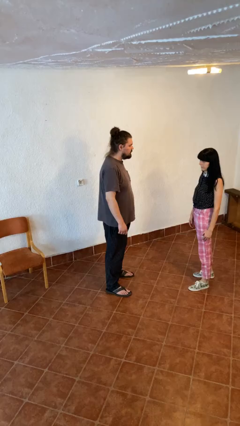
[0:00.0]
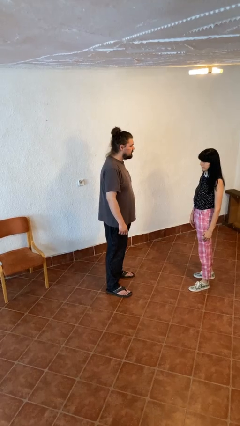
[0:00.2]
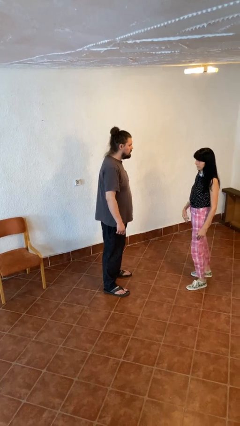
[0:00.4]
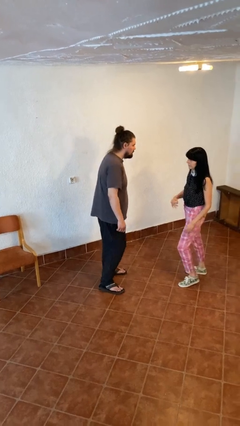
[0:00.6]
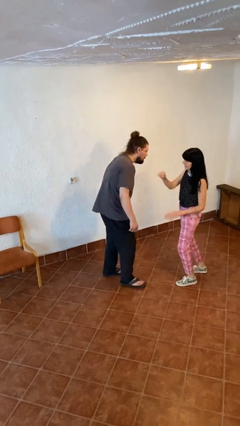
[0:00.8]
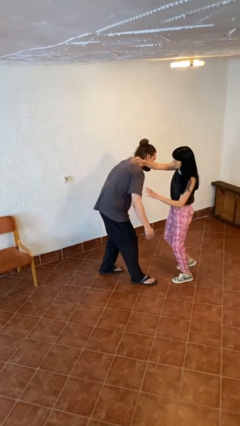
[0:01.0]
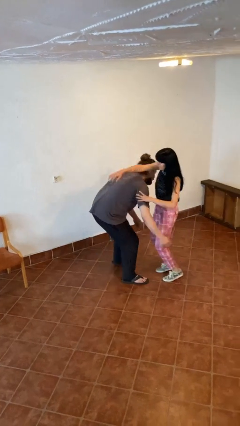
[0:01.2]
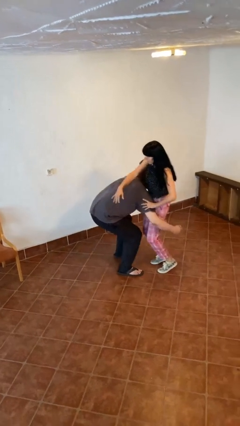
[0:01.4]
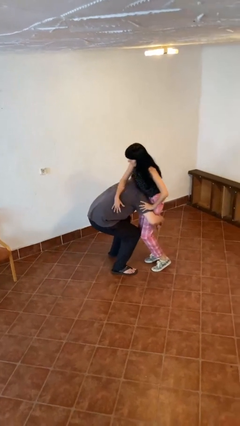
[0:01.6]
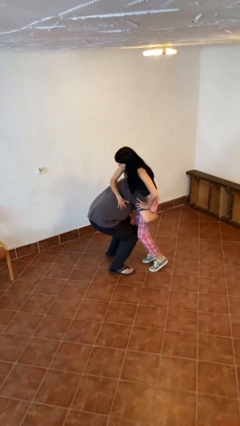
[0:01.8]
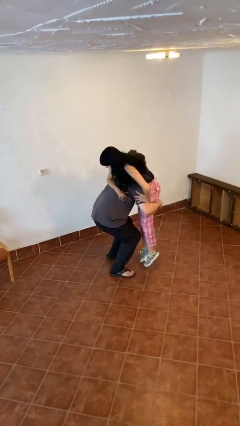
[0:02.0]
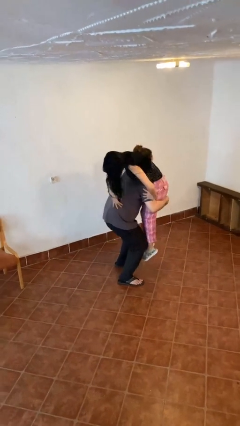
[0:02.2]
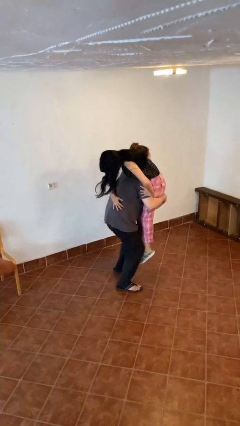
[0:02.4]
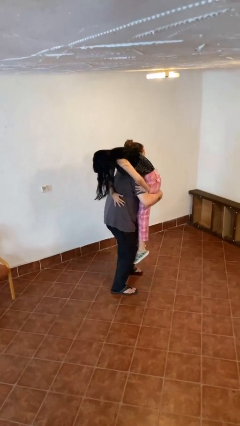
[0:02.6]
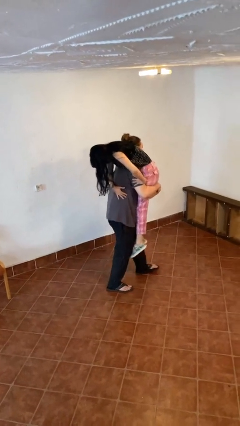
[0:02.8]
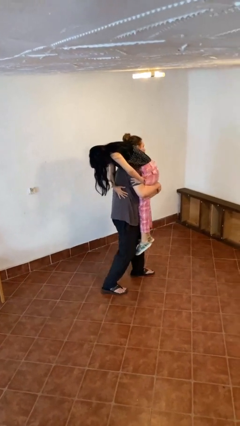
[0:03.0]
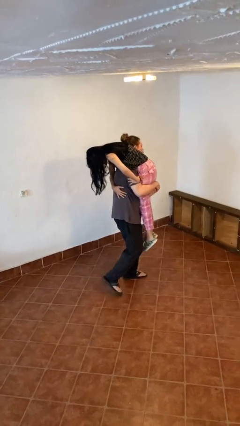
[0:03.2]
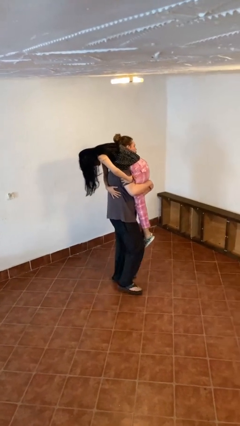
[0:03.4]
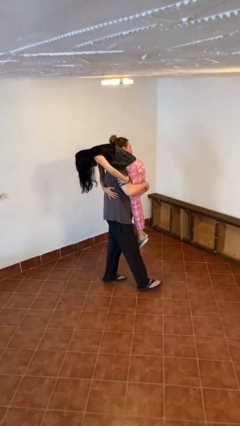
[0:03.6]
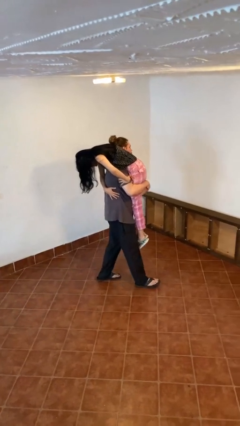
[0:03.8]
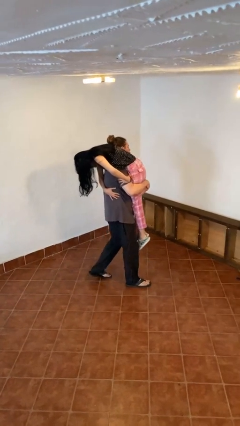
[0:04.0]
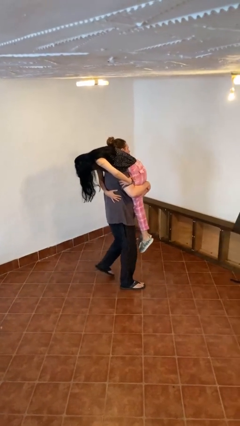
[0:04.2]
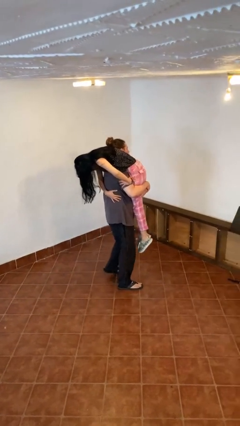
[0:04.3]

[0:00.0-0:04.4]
person carries person over shoulder

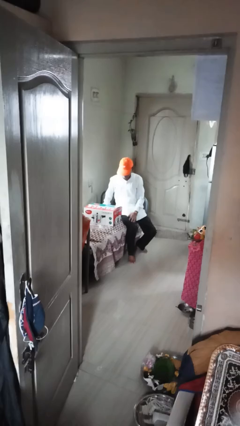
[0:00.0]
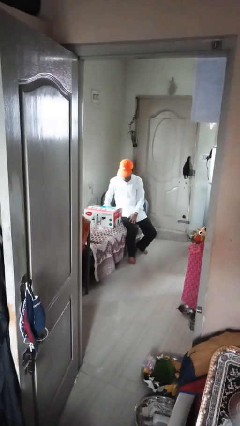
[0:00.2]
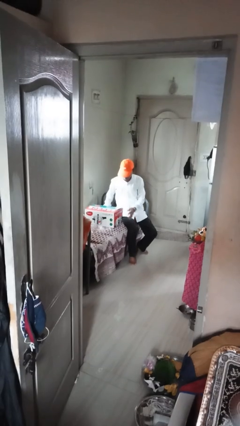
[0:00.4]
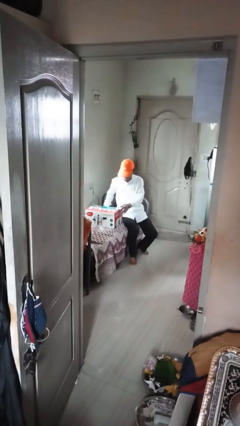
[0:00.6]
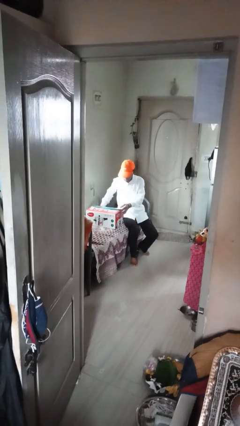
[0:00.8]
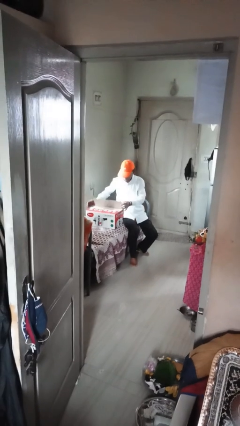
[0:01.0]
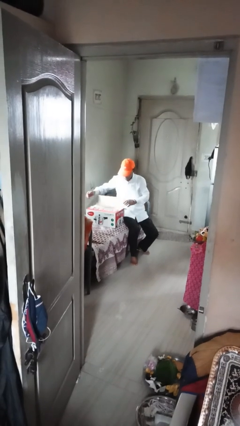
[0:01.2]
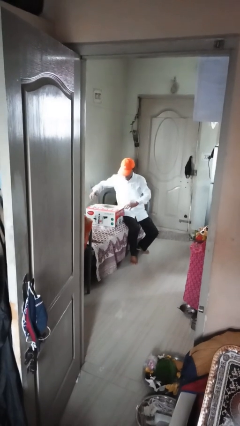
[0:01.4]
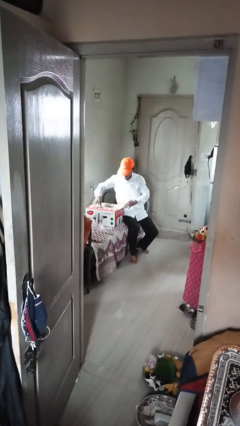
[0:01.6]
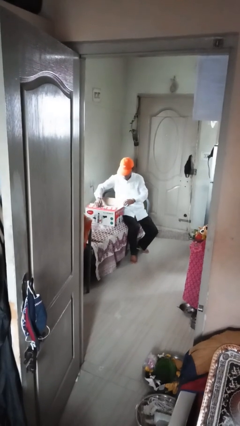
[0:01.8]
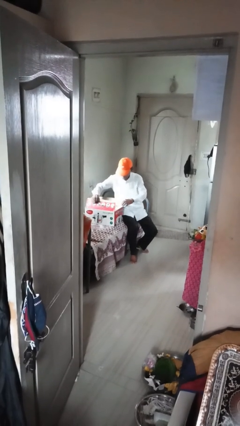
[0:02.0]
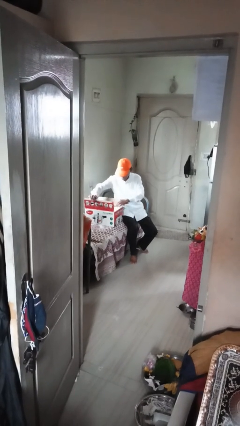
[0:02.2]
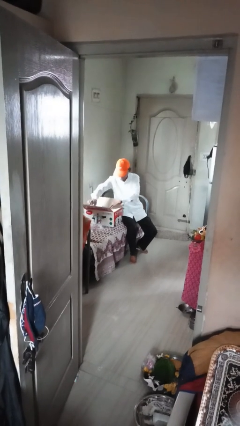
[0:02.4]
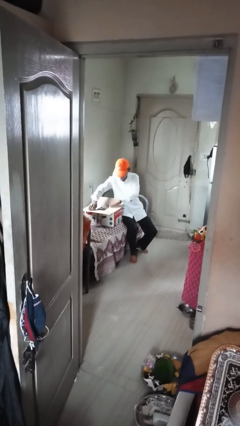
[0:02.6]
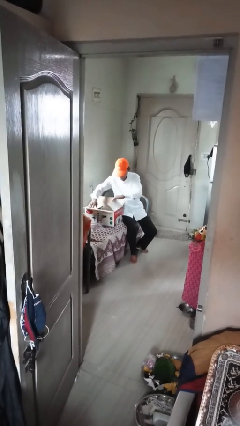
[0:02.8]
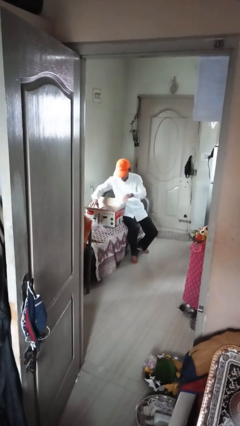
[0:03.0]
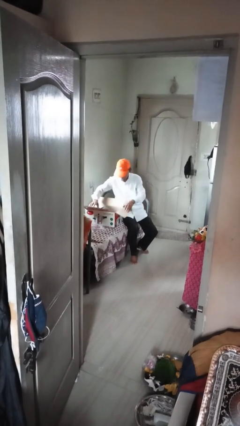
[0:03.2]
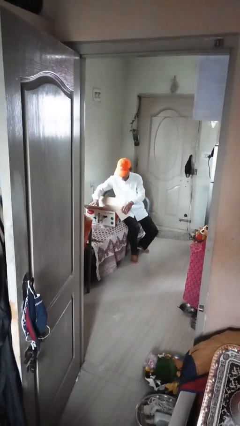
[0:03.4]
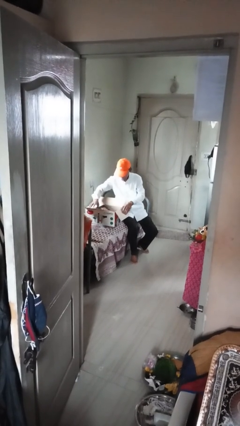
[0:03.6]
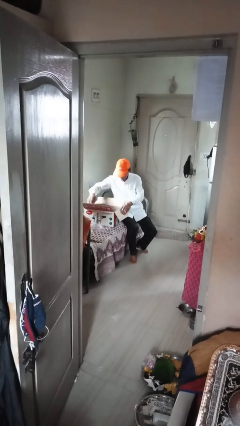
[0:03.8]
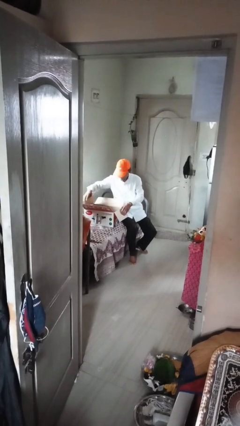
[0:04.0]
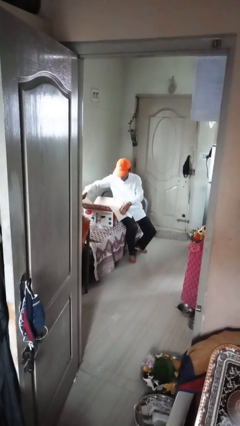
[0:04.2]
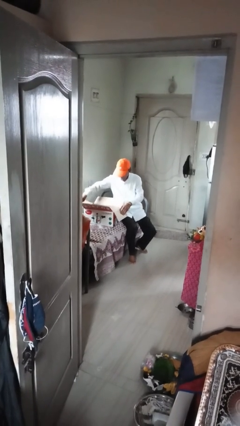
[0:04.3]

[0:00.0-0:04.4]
person opens box

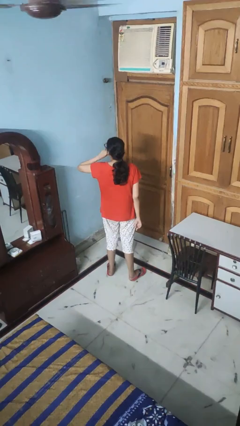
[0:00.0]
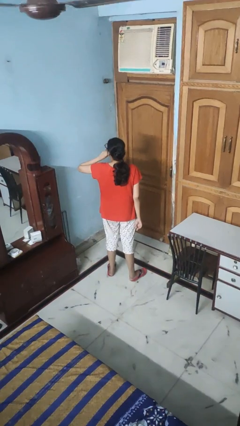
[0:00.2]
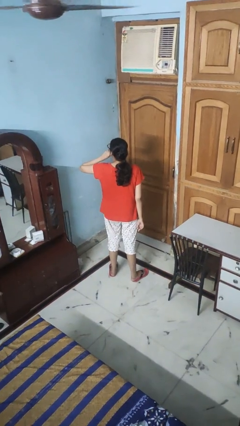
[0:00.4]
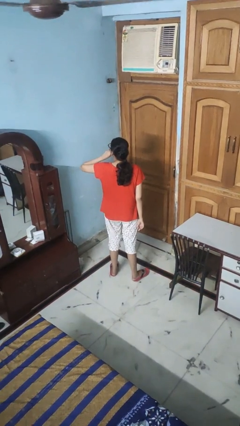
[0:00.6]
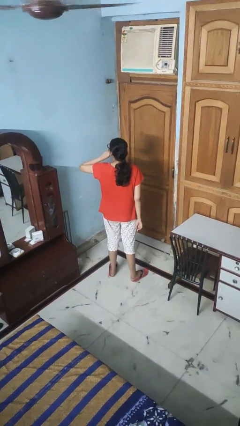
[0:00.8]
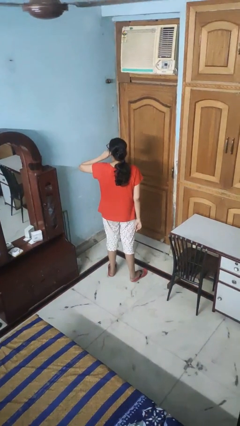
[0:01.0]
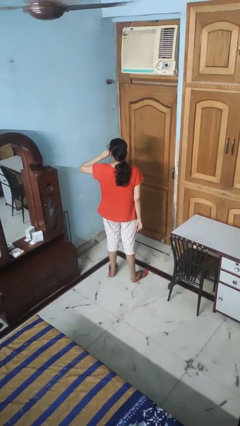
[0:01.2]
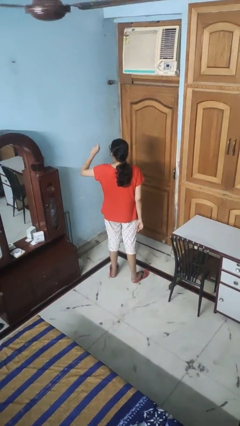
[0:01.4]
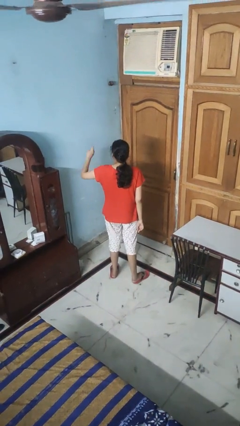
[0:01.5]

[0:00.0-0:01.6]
person gestures be quiet

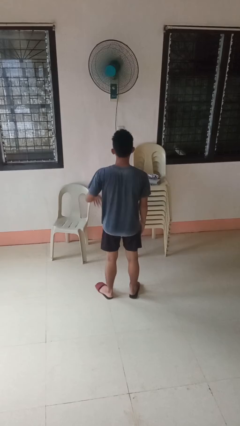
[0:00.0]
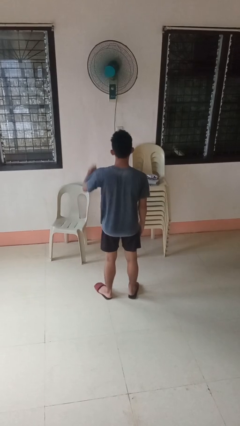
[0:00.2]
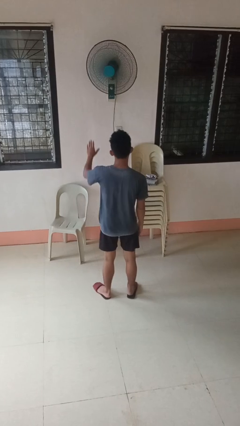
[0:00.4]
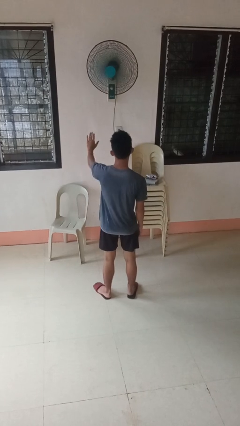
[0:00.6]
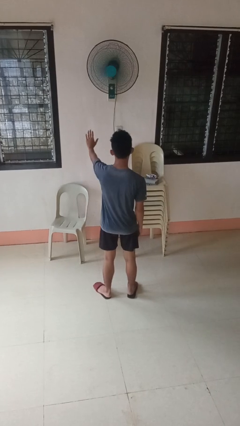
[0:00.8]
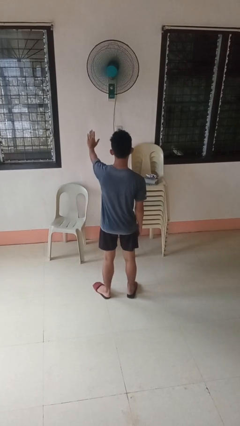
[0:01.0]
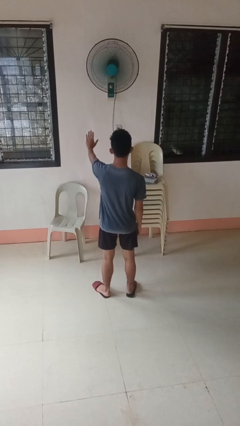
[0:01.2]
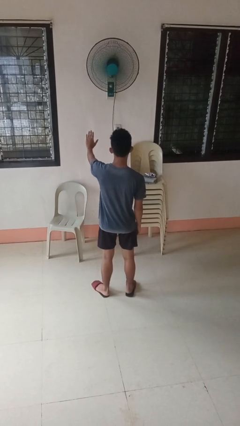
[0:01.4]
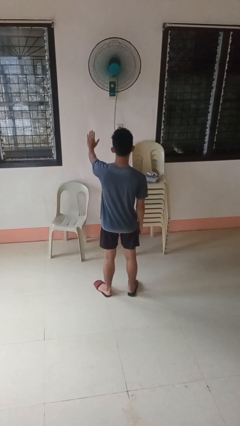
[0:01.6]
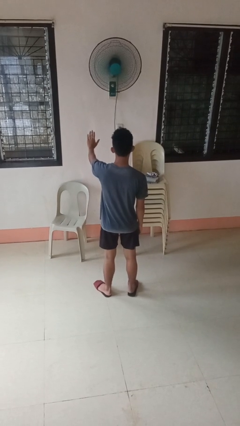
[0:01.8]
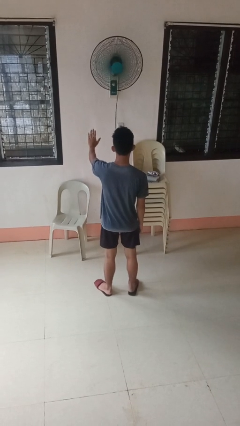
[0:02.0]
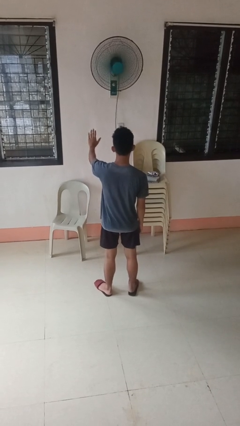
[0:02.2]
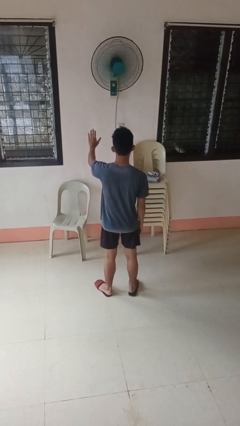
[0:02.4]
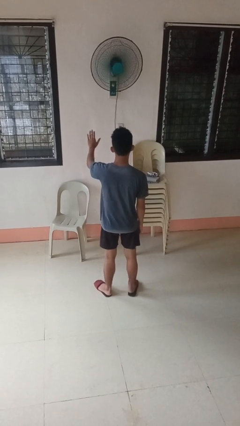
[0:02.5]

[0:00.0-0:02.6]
person gestures stop

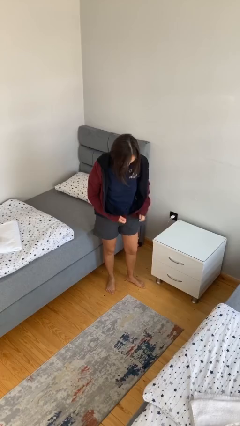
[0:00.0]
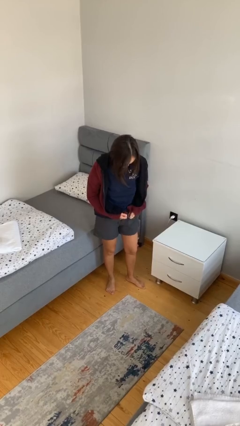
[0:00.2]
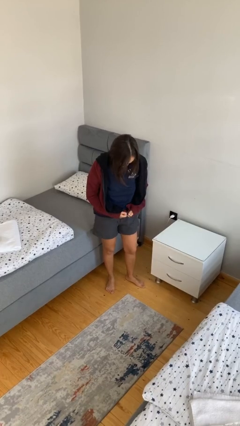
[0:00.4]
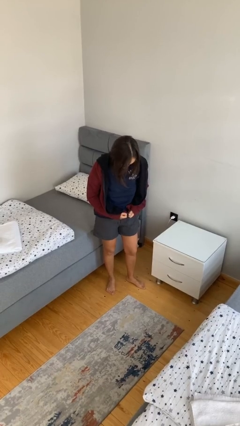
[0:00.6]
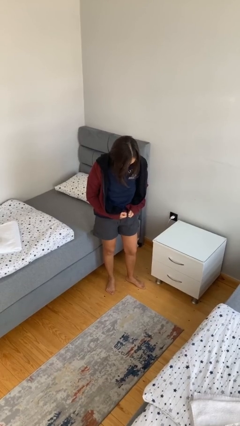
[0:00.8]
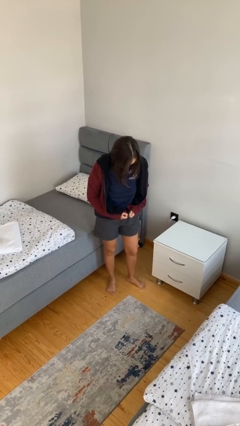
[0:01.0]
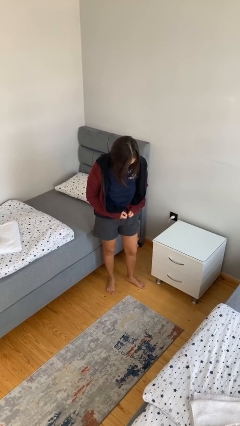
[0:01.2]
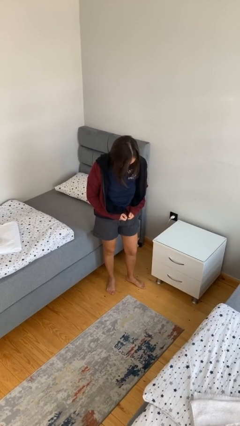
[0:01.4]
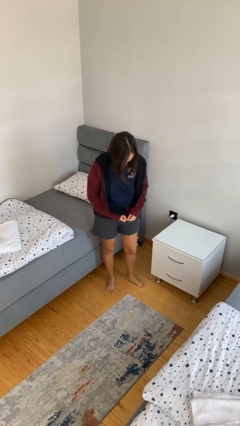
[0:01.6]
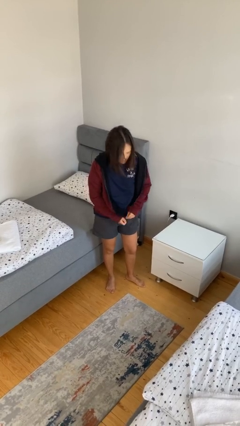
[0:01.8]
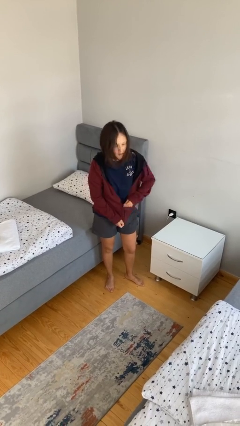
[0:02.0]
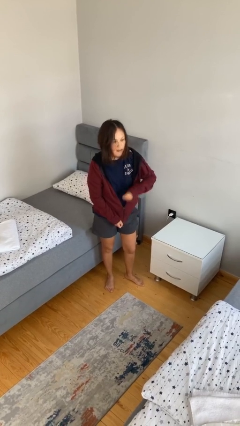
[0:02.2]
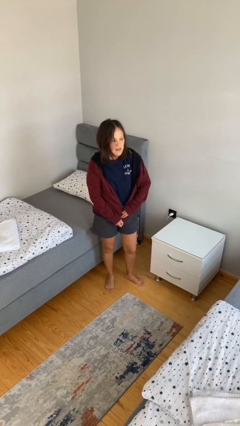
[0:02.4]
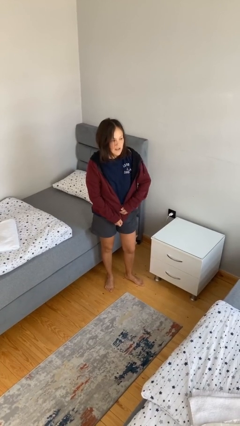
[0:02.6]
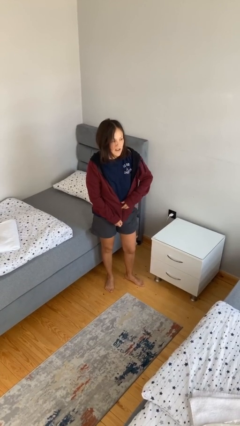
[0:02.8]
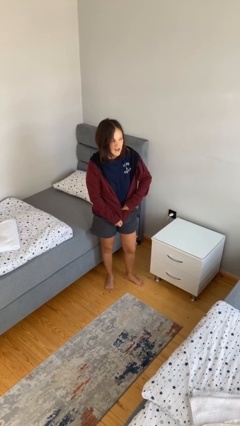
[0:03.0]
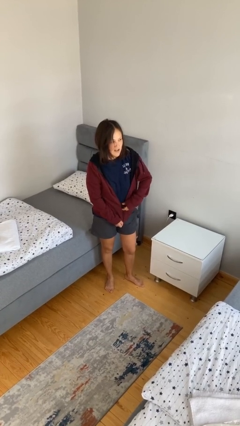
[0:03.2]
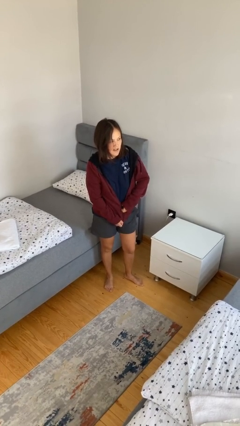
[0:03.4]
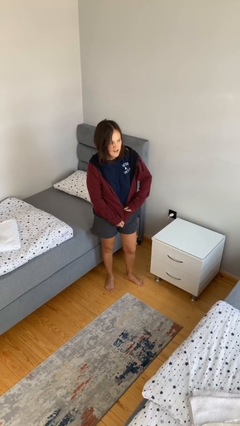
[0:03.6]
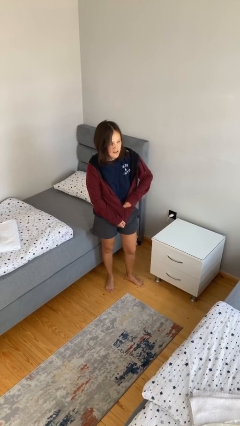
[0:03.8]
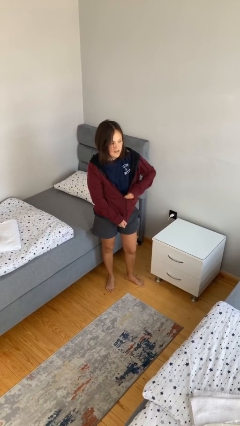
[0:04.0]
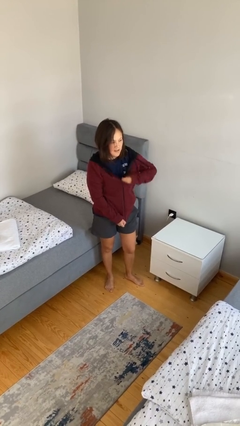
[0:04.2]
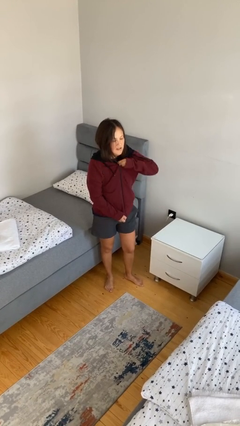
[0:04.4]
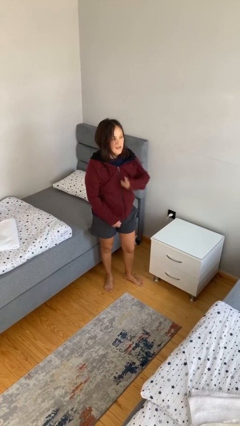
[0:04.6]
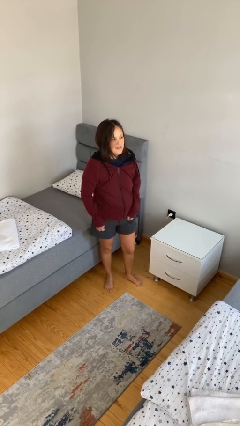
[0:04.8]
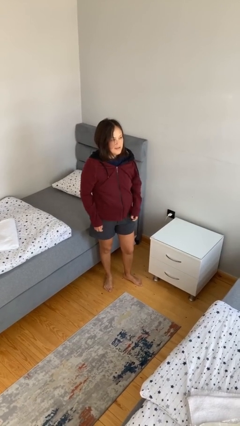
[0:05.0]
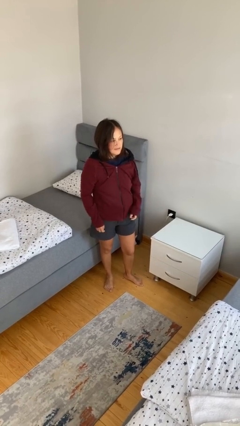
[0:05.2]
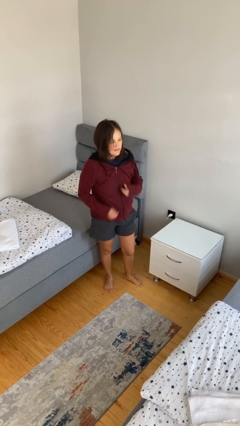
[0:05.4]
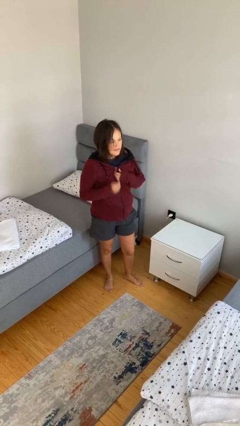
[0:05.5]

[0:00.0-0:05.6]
person zips up jacket
